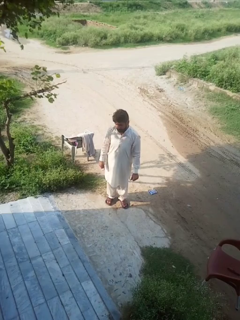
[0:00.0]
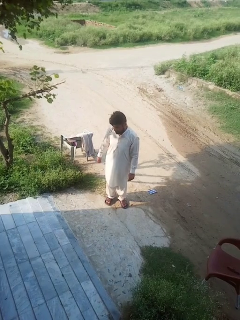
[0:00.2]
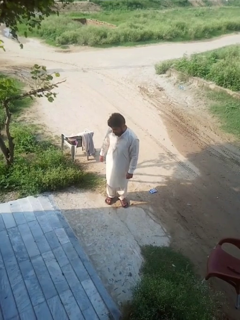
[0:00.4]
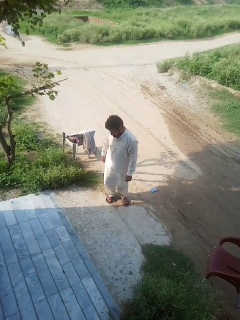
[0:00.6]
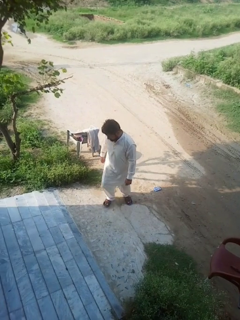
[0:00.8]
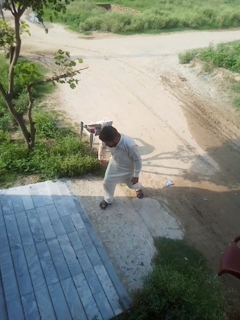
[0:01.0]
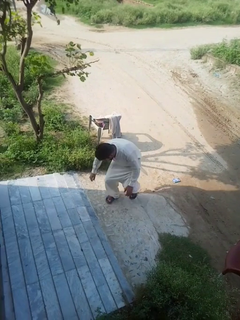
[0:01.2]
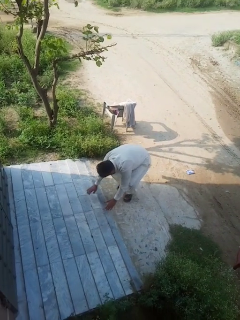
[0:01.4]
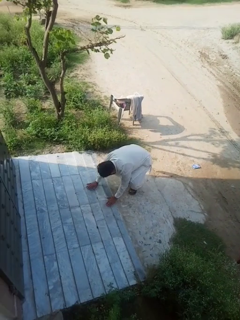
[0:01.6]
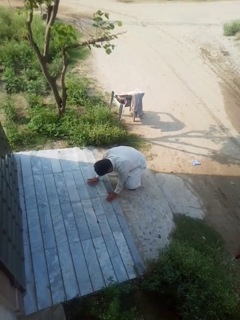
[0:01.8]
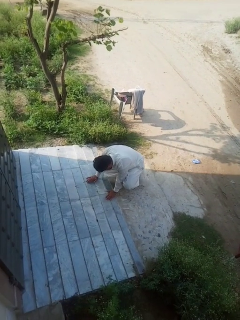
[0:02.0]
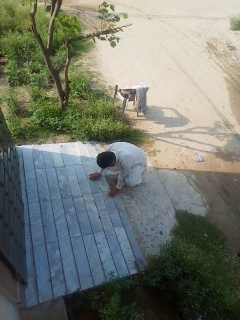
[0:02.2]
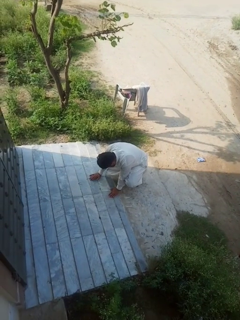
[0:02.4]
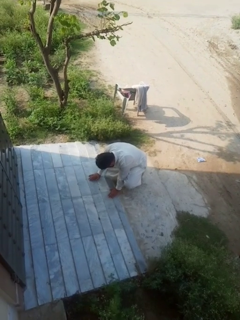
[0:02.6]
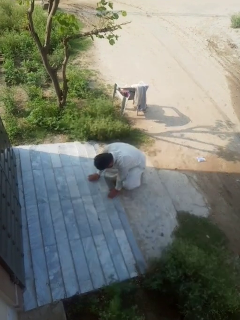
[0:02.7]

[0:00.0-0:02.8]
person trips on object on floor

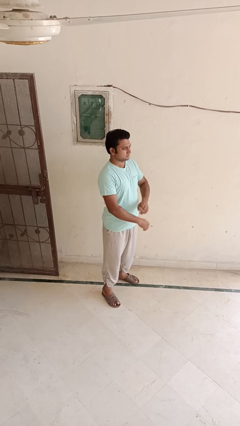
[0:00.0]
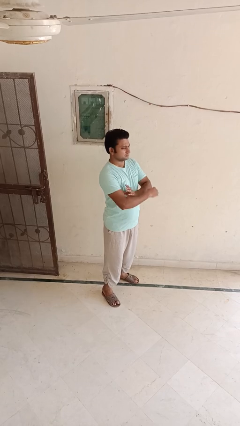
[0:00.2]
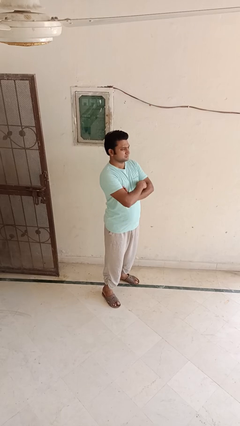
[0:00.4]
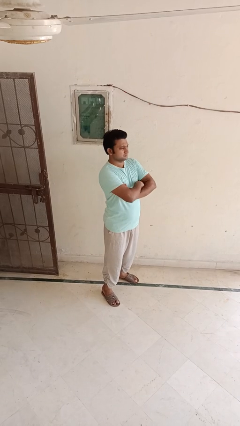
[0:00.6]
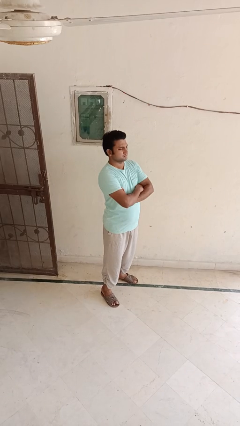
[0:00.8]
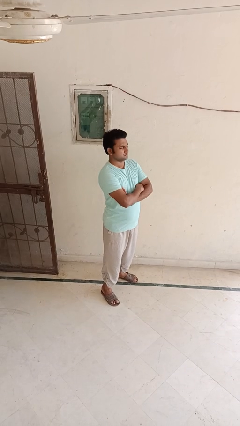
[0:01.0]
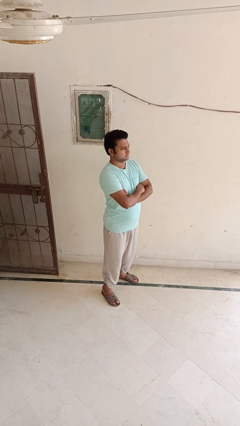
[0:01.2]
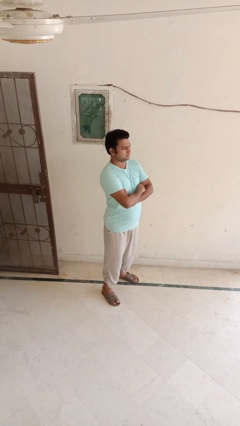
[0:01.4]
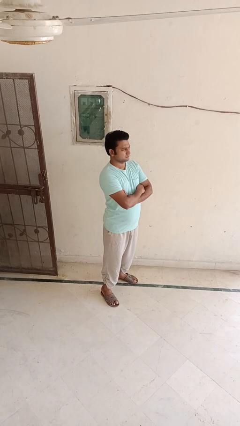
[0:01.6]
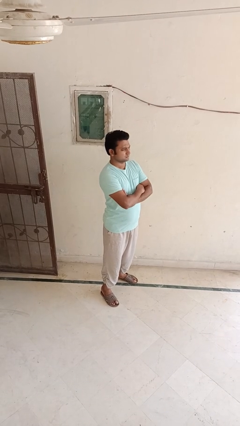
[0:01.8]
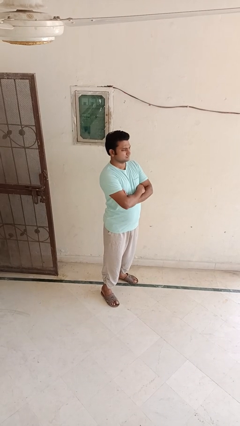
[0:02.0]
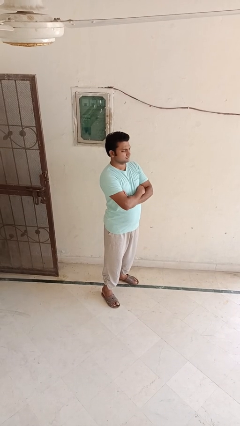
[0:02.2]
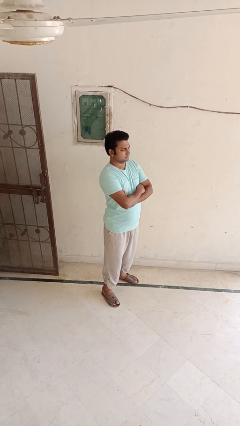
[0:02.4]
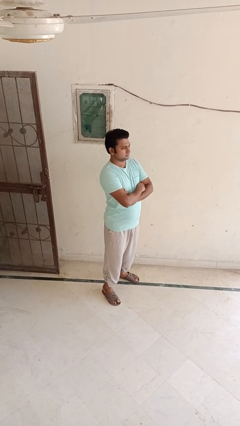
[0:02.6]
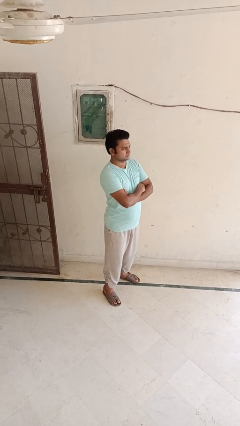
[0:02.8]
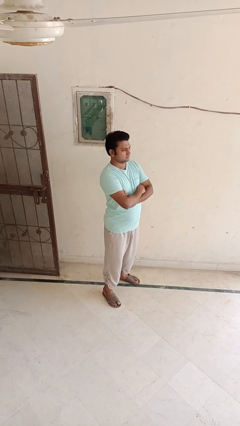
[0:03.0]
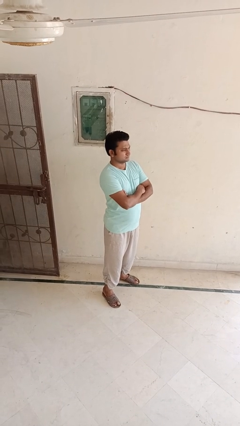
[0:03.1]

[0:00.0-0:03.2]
person crosses arms

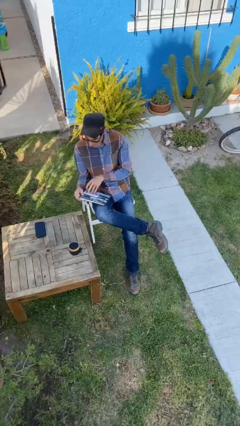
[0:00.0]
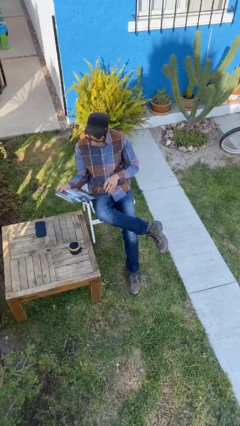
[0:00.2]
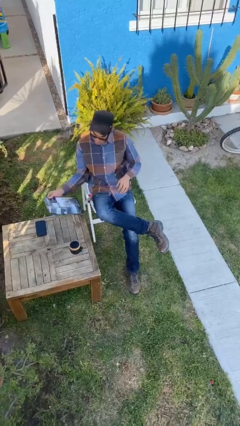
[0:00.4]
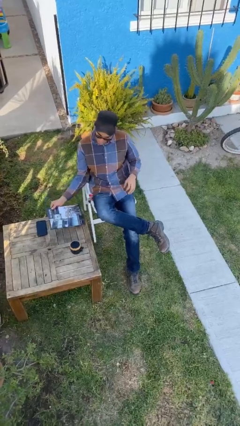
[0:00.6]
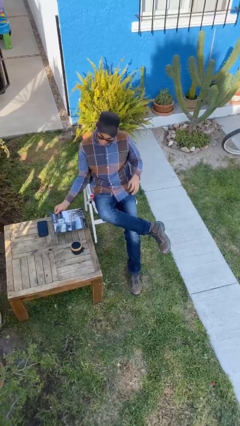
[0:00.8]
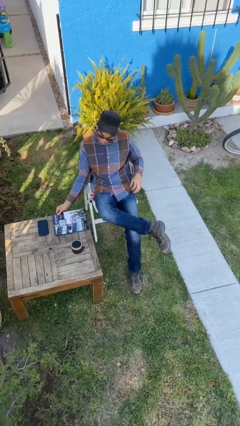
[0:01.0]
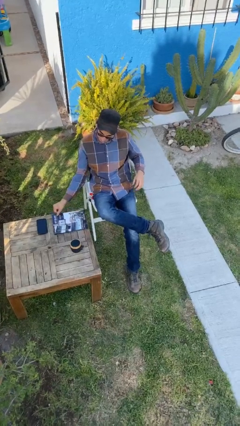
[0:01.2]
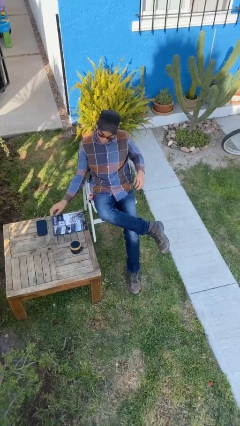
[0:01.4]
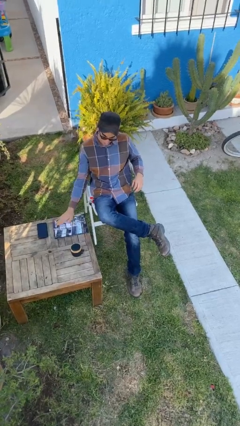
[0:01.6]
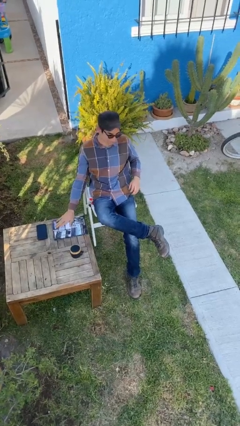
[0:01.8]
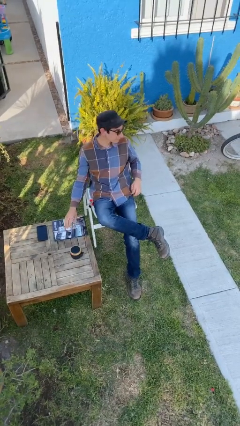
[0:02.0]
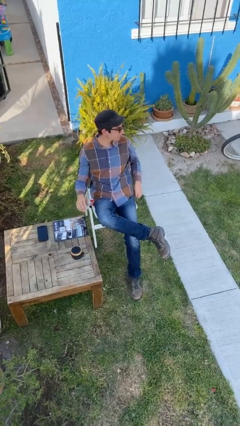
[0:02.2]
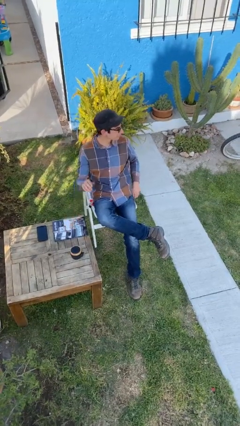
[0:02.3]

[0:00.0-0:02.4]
person puts down object on table

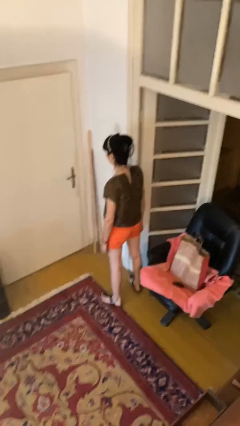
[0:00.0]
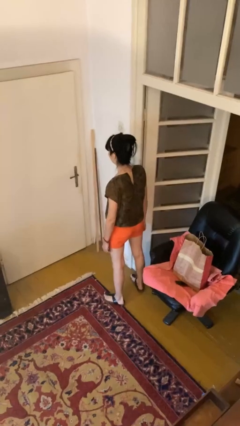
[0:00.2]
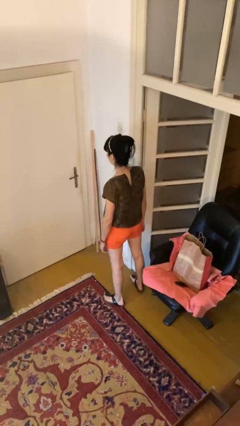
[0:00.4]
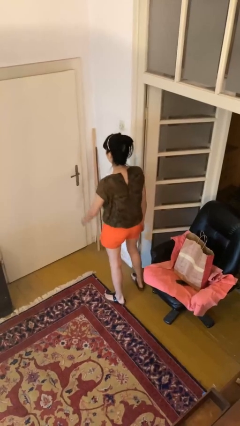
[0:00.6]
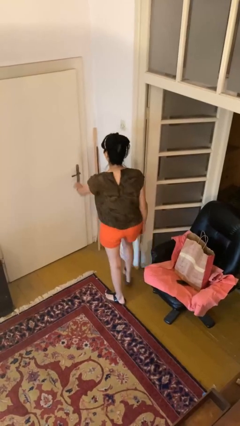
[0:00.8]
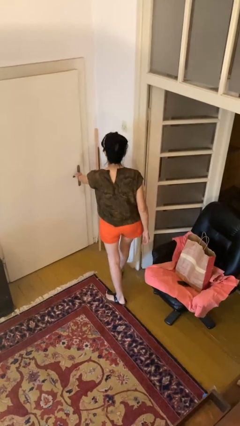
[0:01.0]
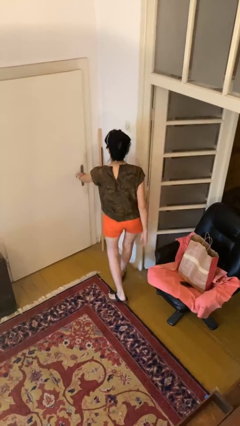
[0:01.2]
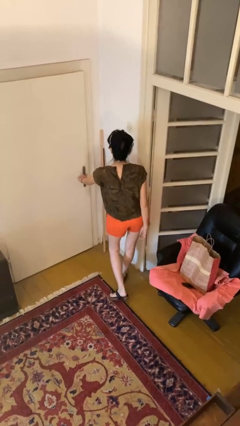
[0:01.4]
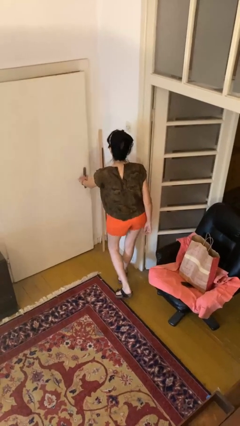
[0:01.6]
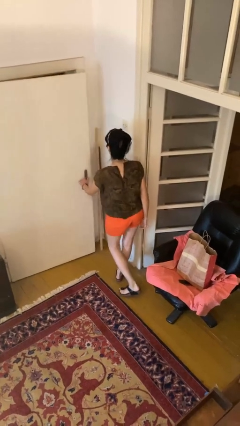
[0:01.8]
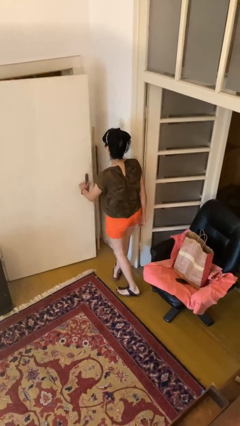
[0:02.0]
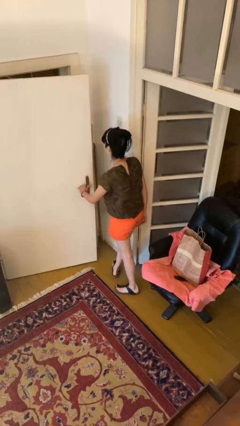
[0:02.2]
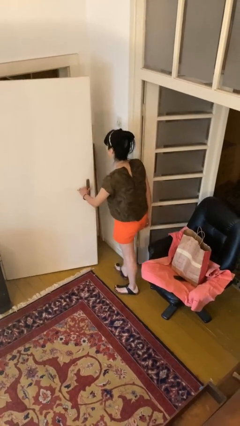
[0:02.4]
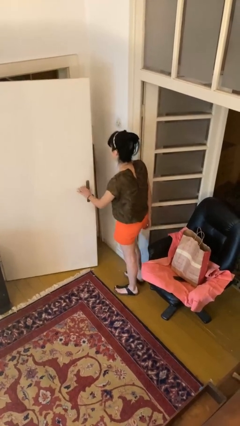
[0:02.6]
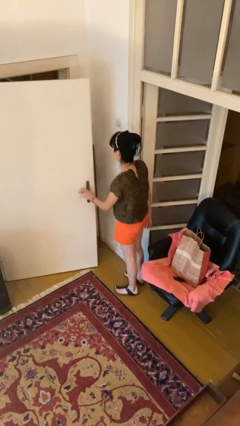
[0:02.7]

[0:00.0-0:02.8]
person opens facility door

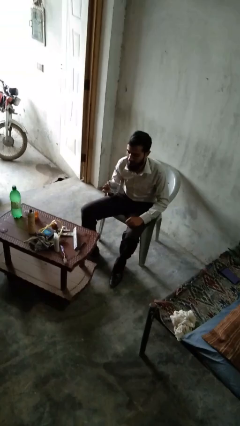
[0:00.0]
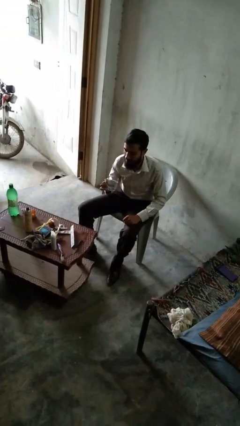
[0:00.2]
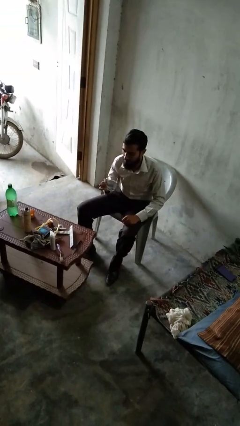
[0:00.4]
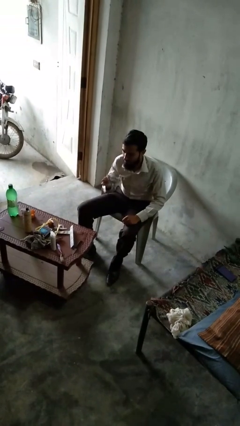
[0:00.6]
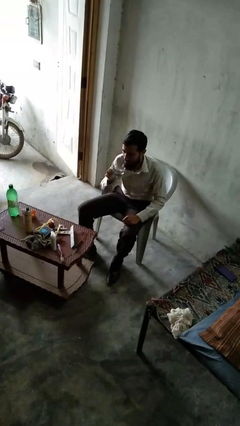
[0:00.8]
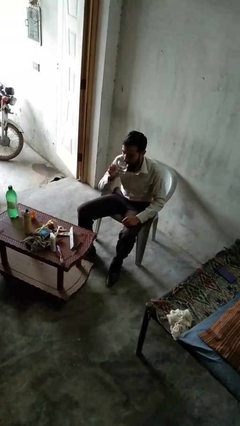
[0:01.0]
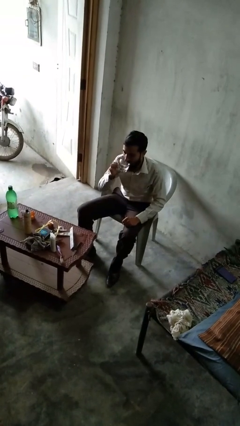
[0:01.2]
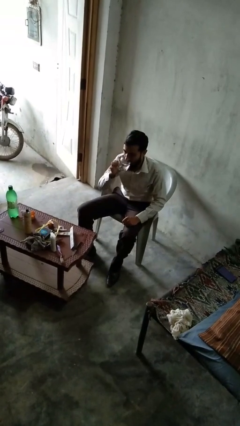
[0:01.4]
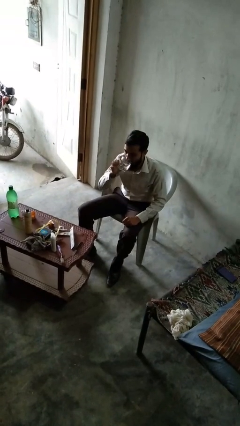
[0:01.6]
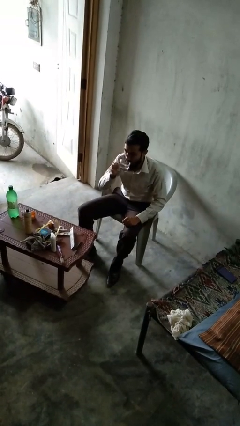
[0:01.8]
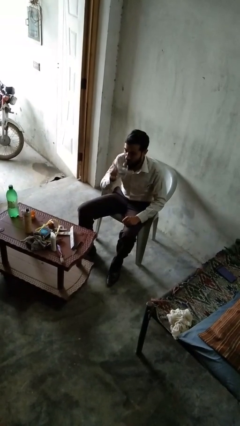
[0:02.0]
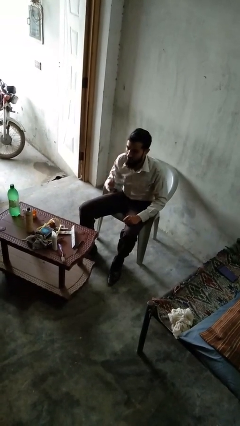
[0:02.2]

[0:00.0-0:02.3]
person drinks from shotglass

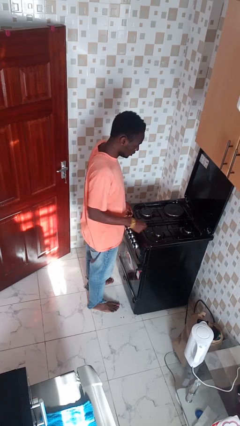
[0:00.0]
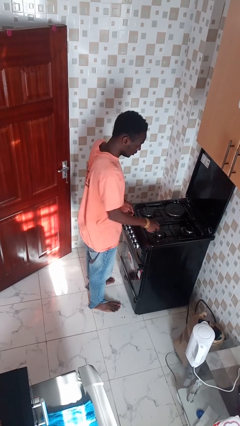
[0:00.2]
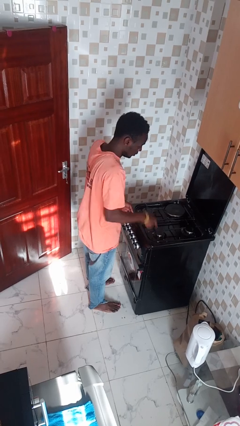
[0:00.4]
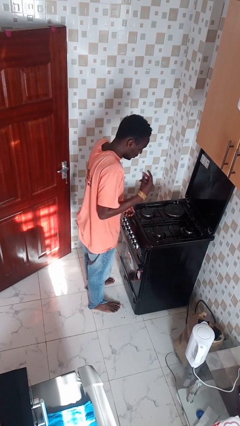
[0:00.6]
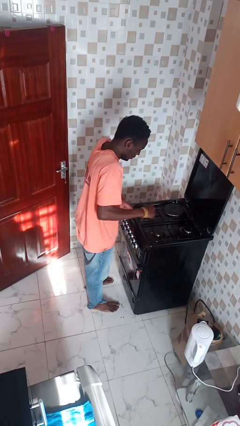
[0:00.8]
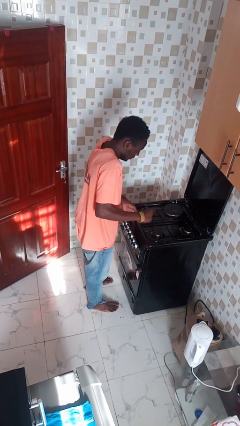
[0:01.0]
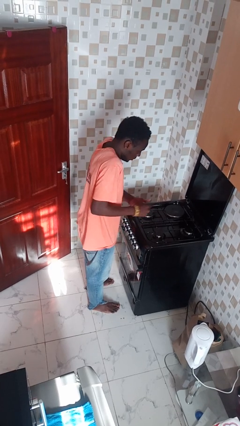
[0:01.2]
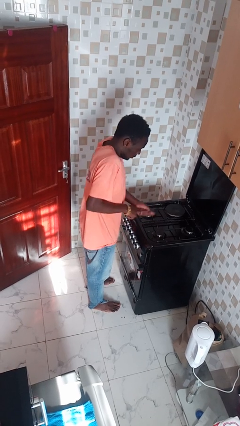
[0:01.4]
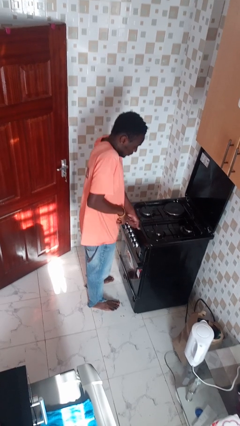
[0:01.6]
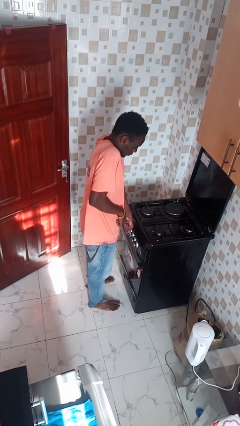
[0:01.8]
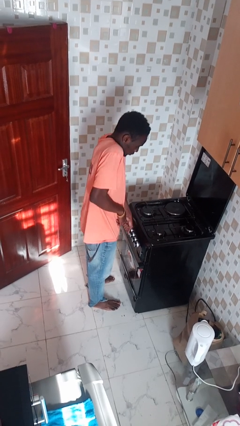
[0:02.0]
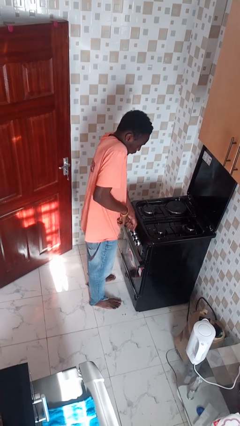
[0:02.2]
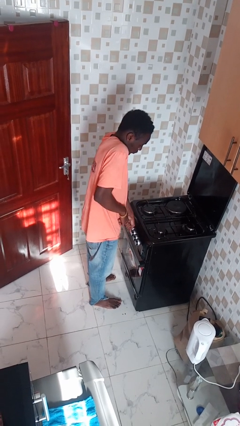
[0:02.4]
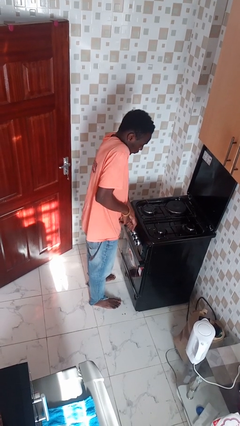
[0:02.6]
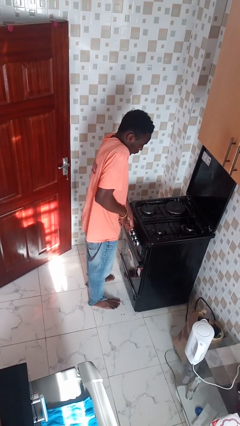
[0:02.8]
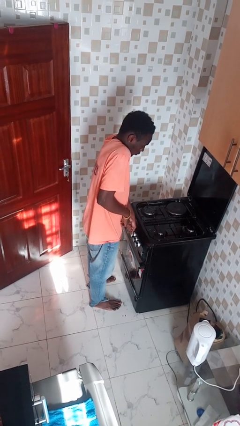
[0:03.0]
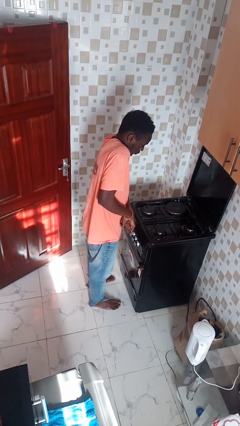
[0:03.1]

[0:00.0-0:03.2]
person burns hand

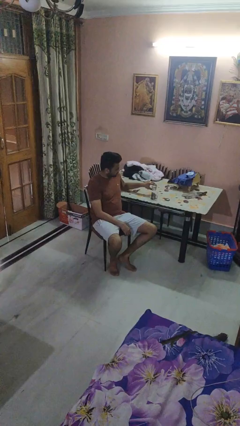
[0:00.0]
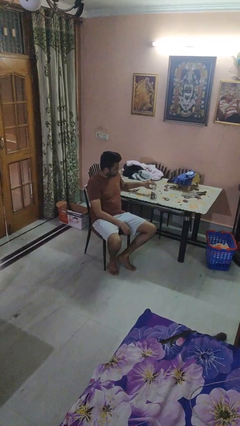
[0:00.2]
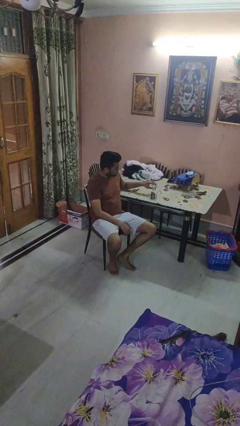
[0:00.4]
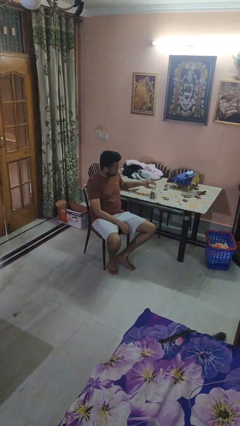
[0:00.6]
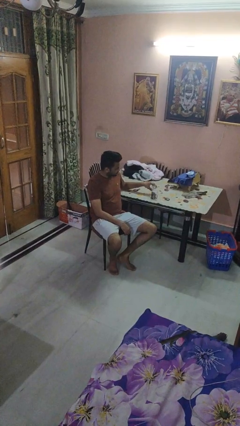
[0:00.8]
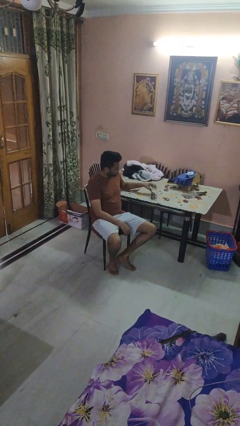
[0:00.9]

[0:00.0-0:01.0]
person pours liquid into cup
